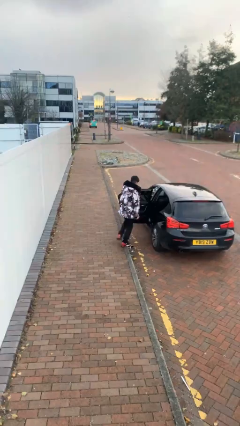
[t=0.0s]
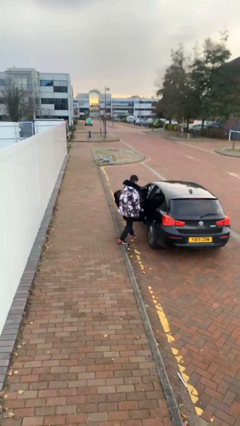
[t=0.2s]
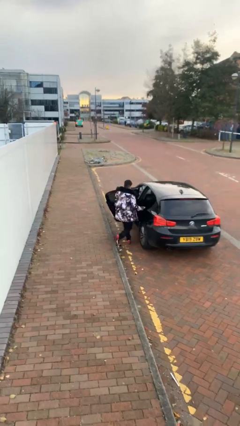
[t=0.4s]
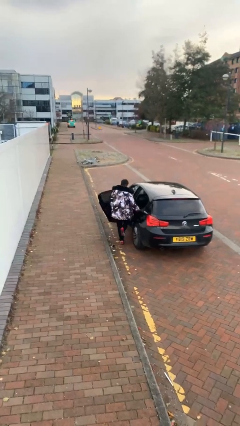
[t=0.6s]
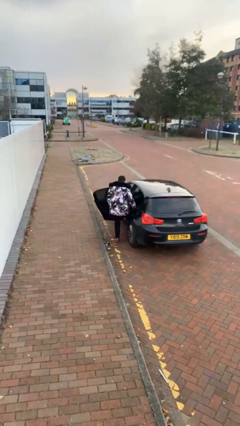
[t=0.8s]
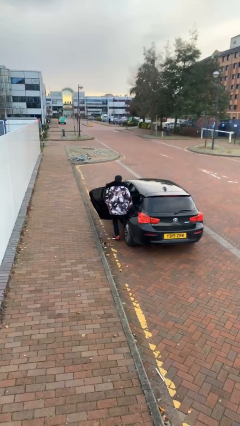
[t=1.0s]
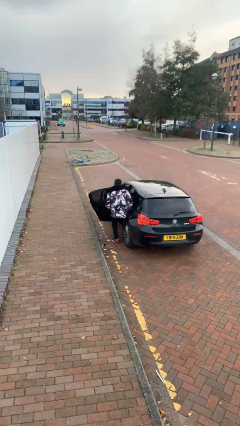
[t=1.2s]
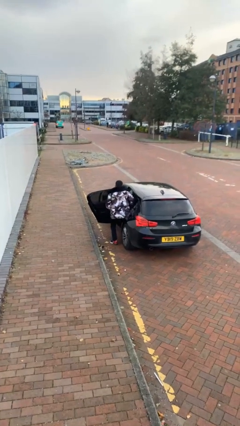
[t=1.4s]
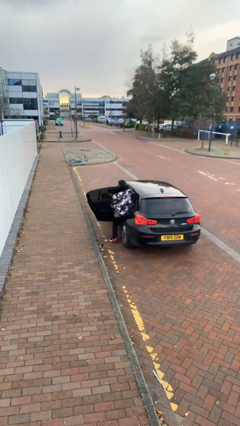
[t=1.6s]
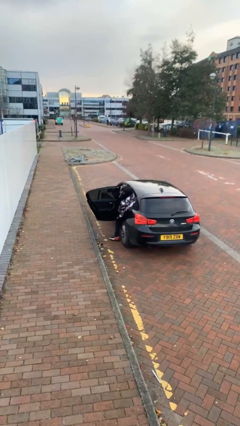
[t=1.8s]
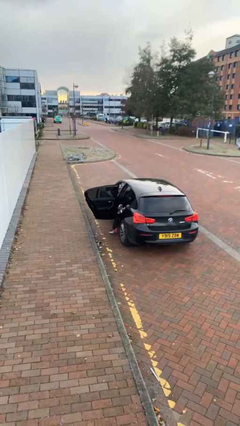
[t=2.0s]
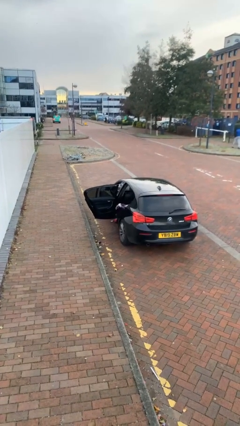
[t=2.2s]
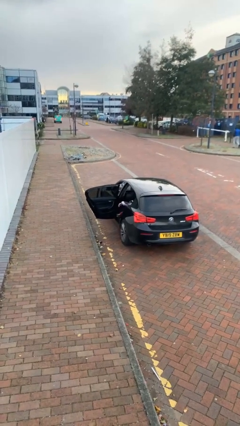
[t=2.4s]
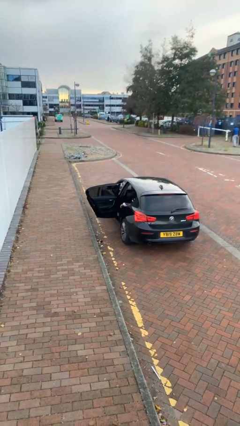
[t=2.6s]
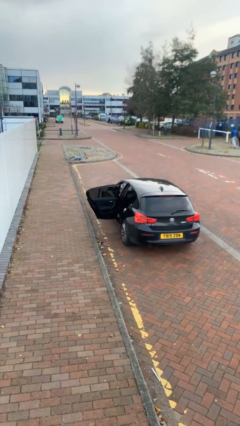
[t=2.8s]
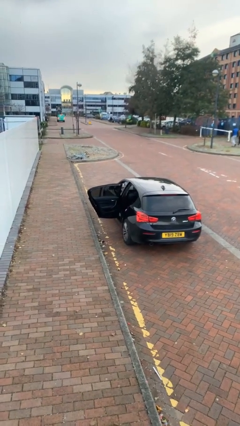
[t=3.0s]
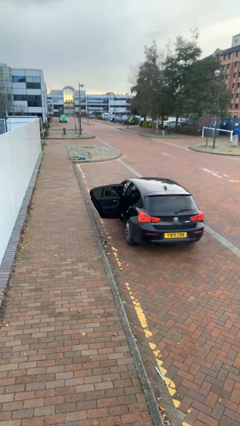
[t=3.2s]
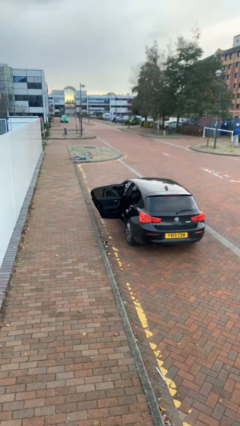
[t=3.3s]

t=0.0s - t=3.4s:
person enters car

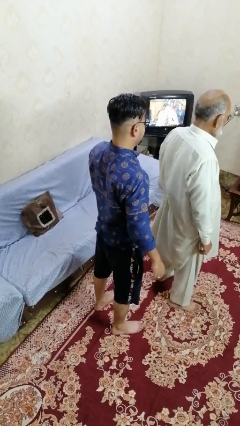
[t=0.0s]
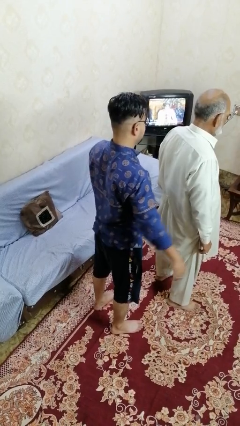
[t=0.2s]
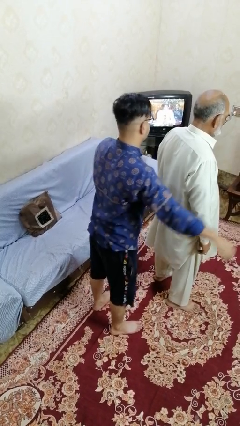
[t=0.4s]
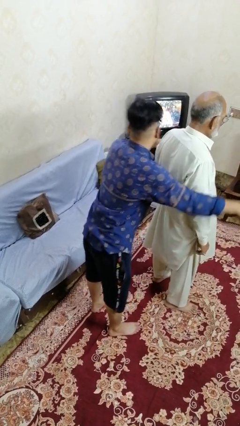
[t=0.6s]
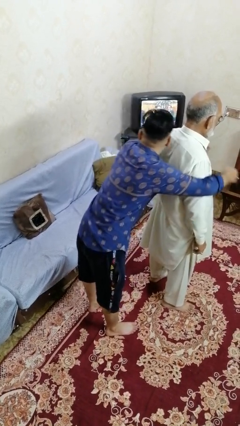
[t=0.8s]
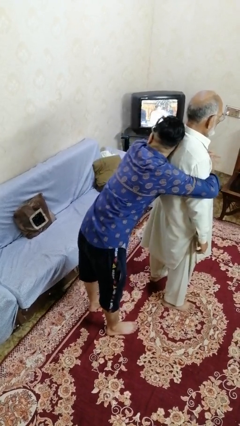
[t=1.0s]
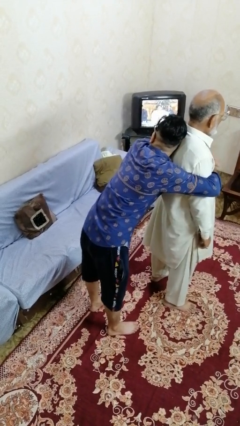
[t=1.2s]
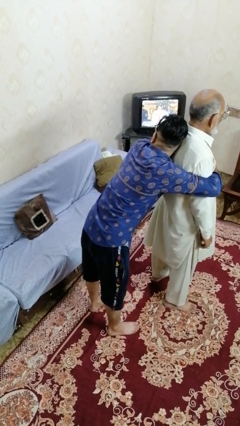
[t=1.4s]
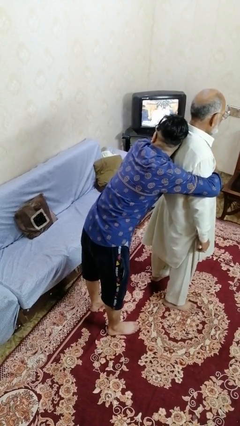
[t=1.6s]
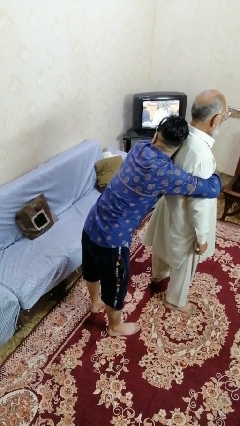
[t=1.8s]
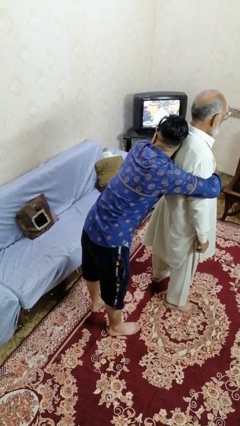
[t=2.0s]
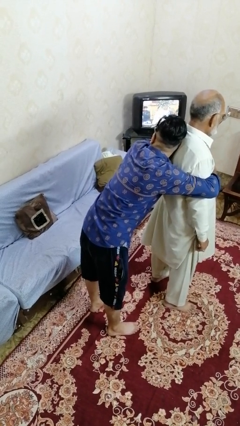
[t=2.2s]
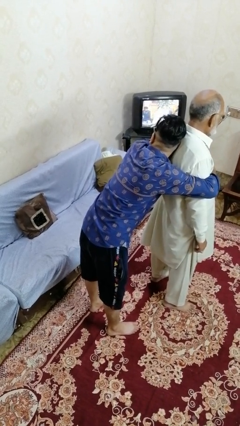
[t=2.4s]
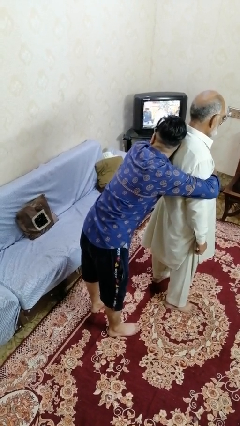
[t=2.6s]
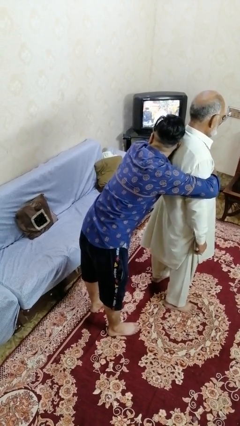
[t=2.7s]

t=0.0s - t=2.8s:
person hugs person from behind

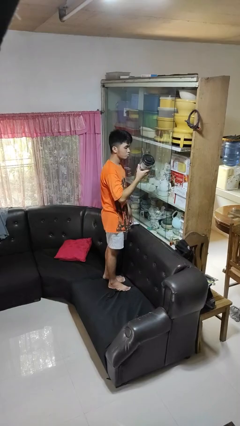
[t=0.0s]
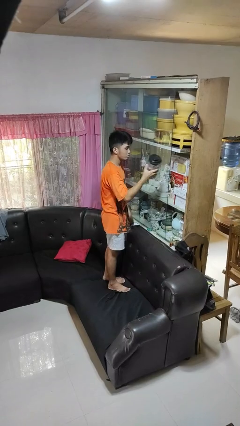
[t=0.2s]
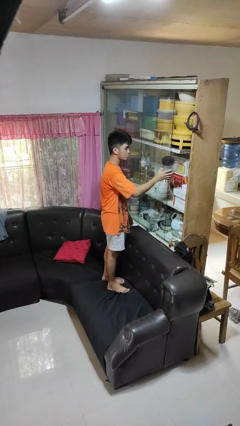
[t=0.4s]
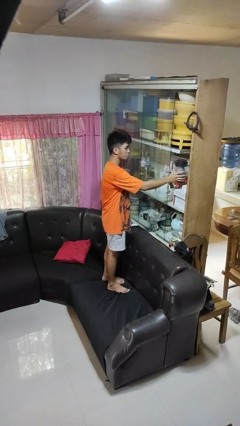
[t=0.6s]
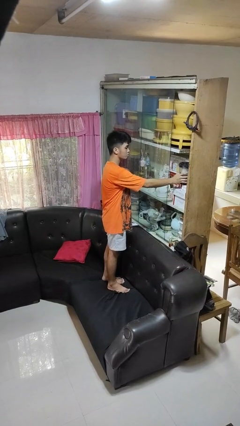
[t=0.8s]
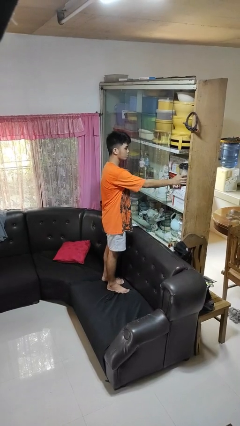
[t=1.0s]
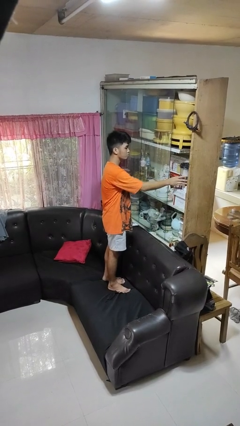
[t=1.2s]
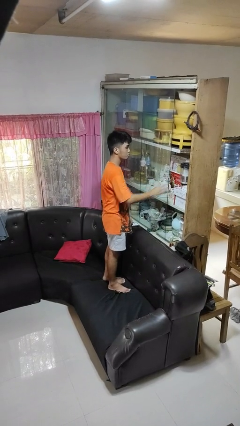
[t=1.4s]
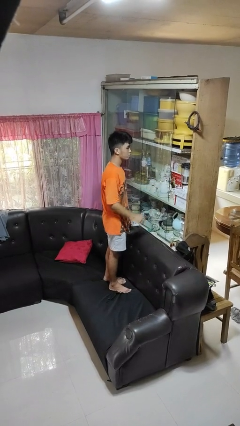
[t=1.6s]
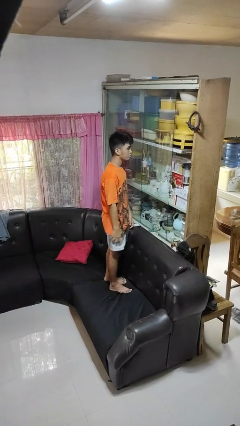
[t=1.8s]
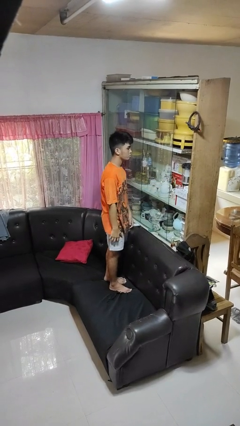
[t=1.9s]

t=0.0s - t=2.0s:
person puts down object into cabinet

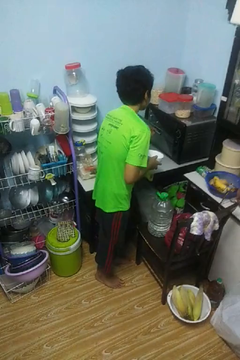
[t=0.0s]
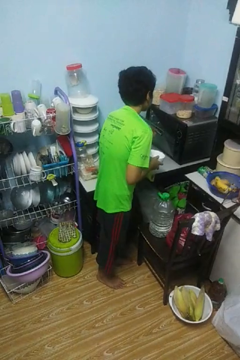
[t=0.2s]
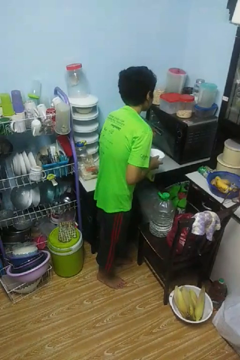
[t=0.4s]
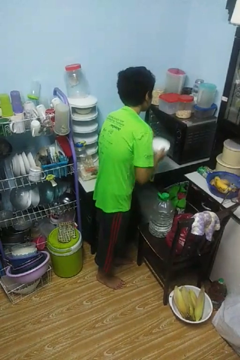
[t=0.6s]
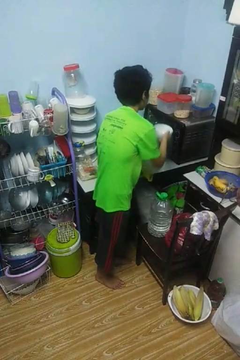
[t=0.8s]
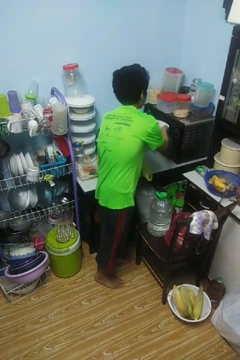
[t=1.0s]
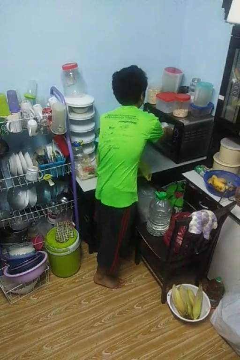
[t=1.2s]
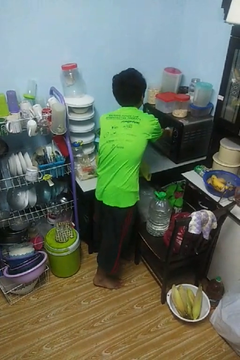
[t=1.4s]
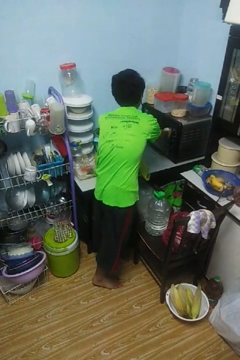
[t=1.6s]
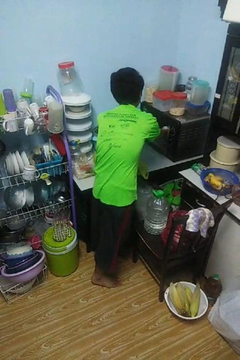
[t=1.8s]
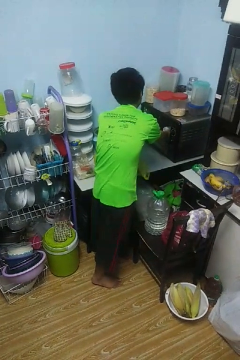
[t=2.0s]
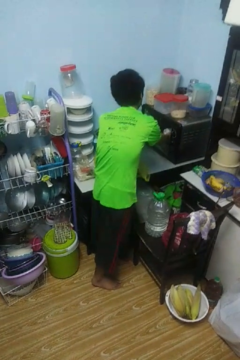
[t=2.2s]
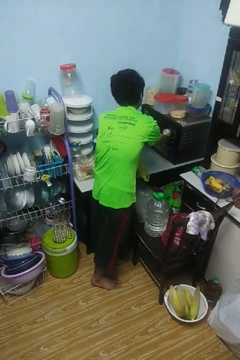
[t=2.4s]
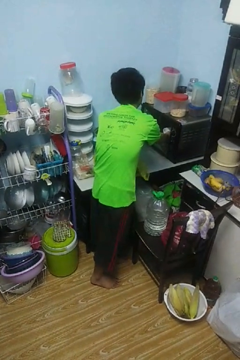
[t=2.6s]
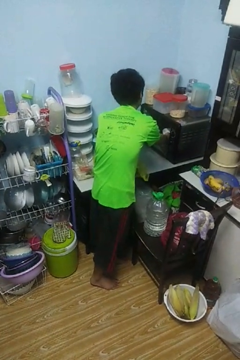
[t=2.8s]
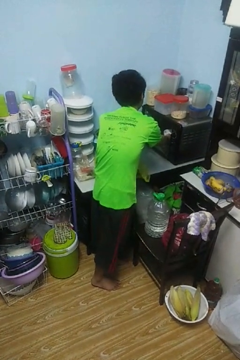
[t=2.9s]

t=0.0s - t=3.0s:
person puts object into microwave

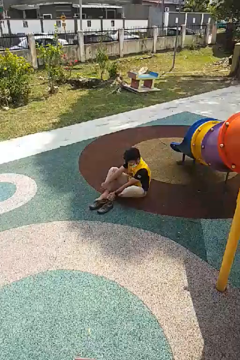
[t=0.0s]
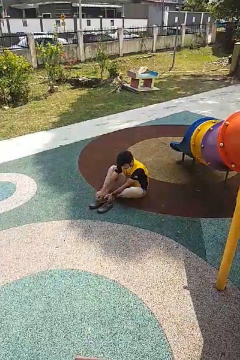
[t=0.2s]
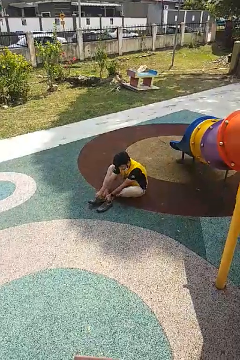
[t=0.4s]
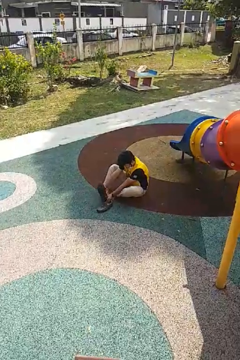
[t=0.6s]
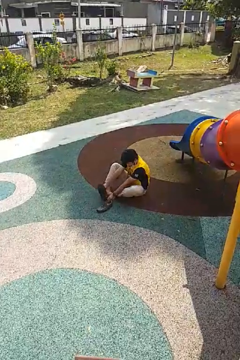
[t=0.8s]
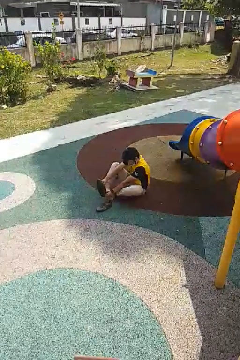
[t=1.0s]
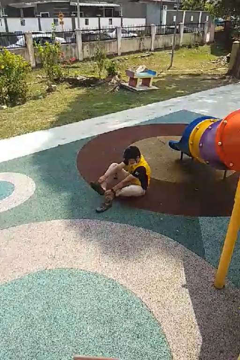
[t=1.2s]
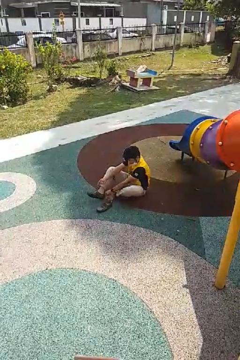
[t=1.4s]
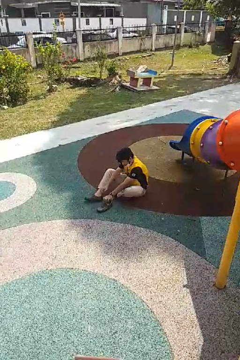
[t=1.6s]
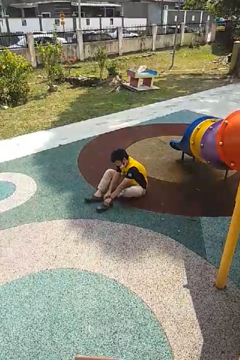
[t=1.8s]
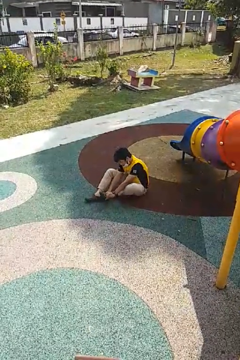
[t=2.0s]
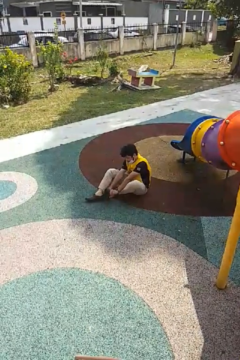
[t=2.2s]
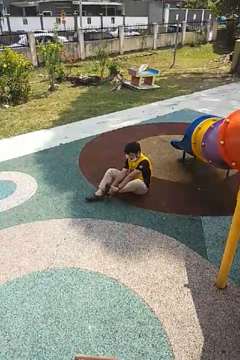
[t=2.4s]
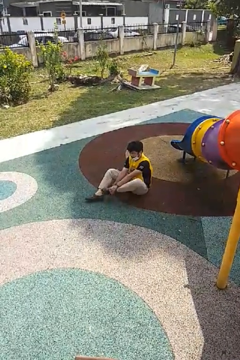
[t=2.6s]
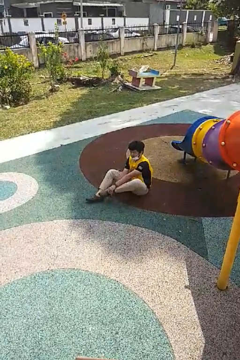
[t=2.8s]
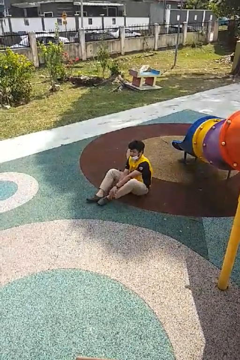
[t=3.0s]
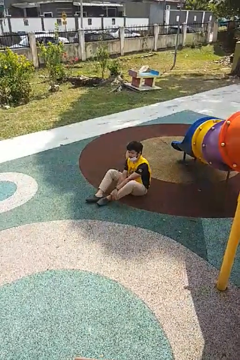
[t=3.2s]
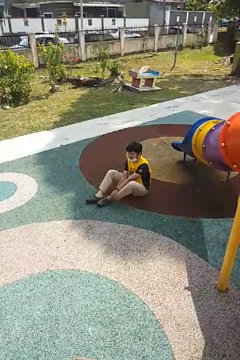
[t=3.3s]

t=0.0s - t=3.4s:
person puts on shoes

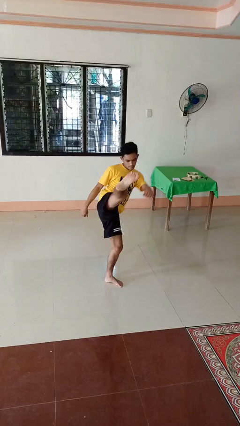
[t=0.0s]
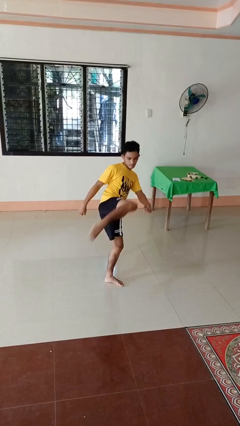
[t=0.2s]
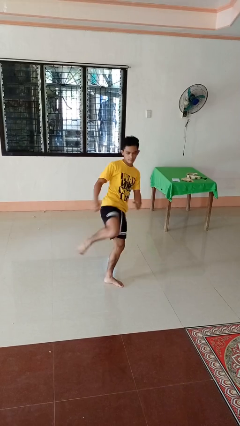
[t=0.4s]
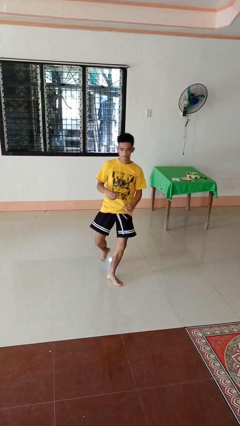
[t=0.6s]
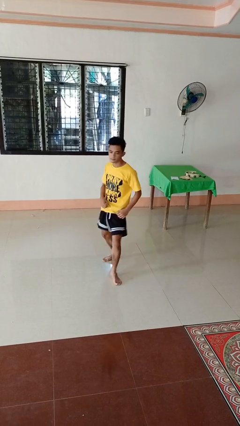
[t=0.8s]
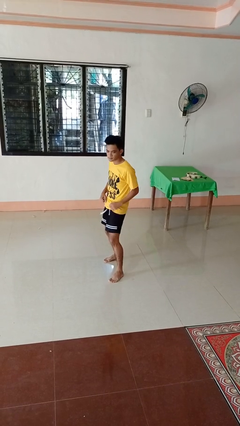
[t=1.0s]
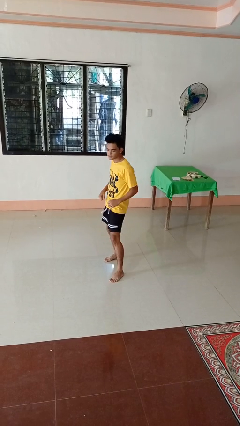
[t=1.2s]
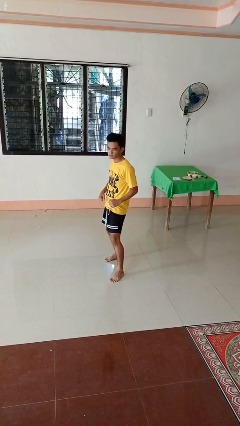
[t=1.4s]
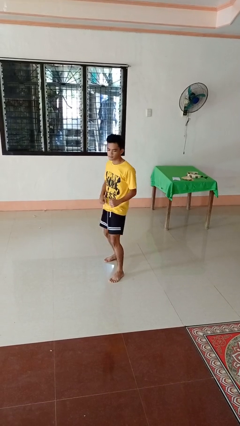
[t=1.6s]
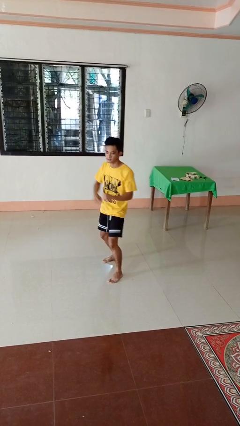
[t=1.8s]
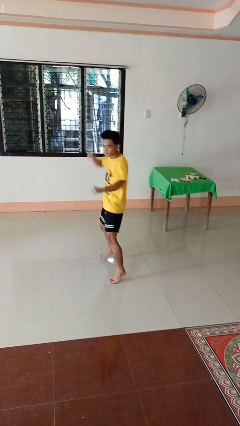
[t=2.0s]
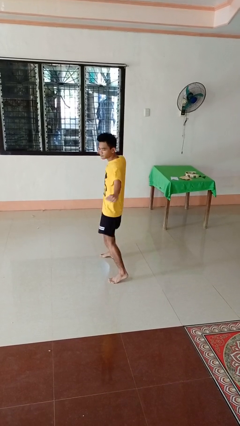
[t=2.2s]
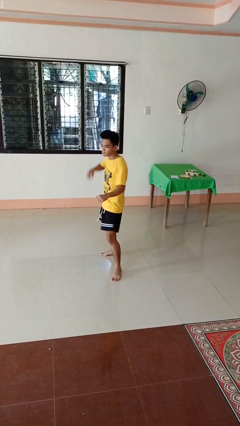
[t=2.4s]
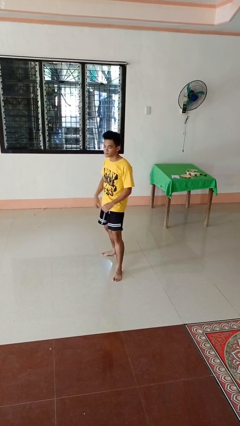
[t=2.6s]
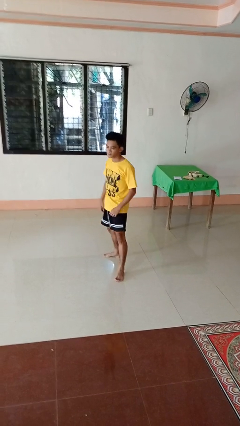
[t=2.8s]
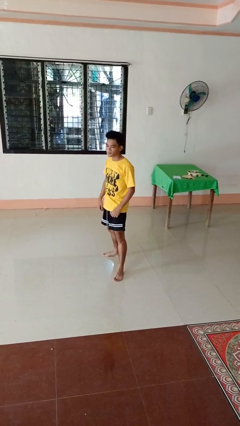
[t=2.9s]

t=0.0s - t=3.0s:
person karate kicks

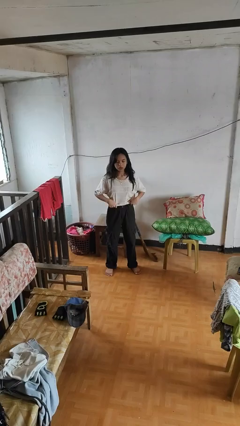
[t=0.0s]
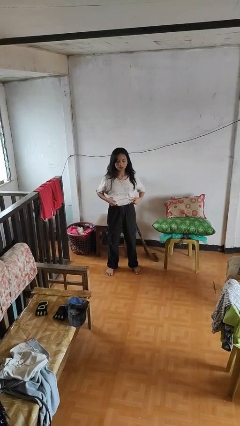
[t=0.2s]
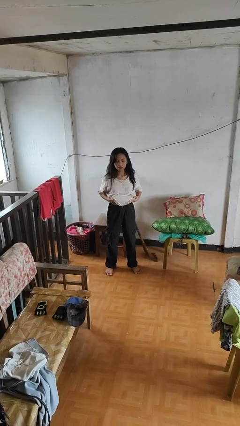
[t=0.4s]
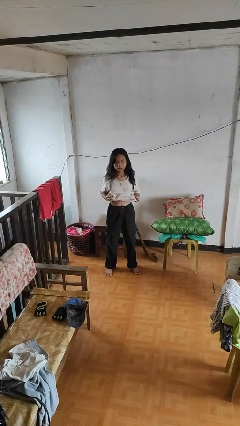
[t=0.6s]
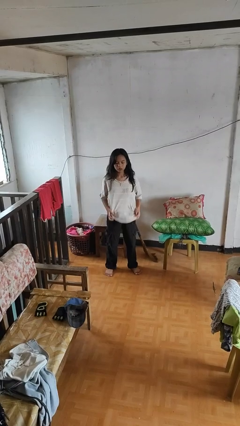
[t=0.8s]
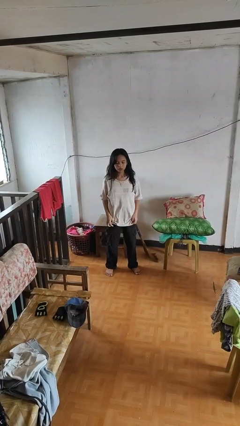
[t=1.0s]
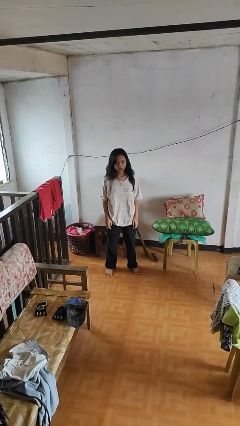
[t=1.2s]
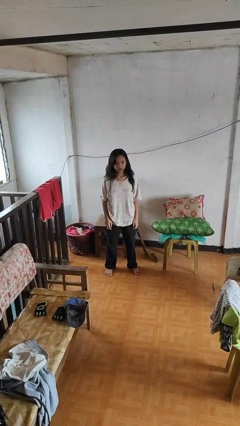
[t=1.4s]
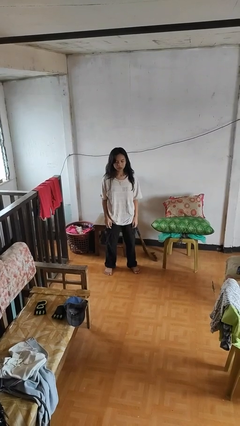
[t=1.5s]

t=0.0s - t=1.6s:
person untucks shirt
